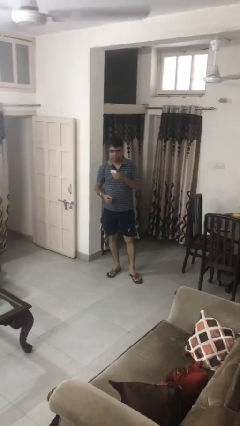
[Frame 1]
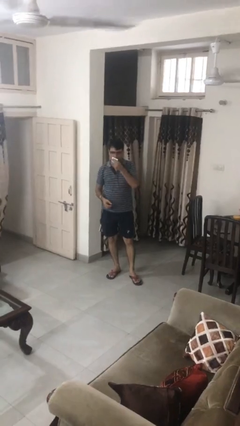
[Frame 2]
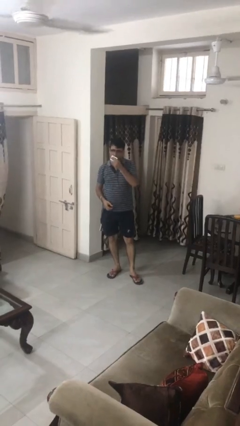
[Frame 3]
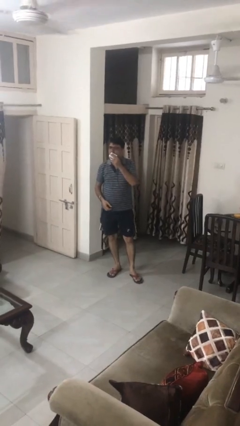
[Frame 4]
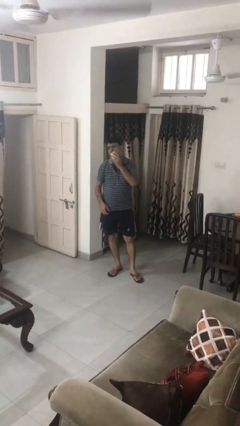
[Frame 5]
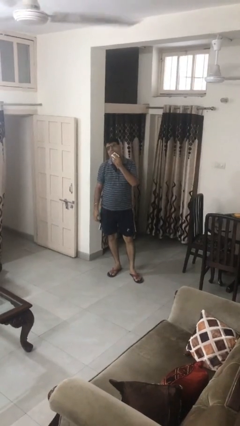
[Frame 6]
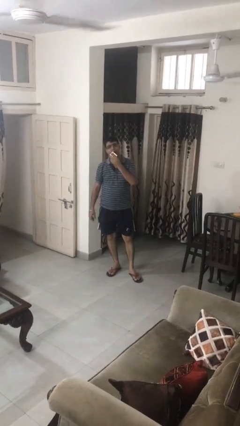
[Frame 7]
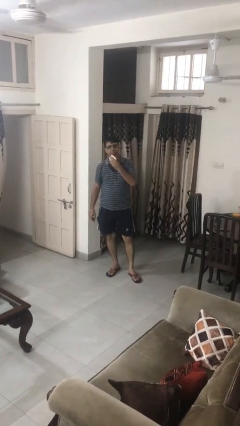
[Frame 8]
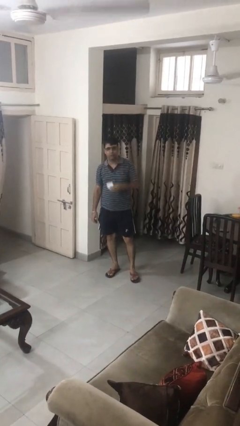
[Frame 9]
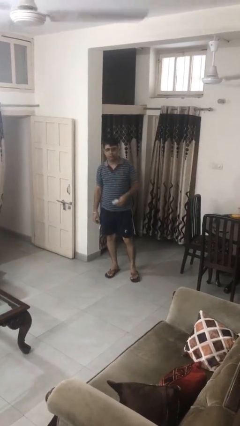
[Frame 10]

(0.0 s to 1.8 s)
person wipes mouth with napkin

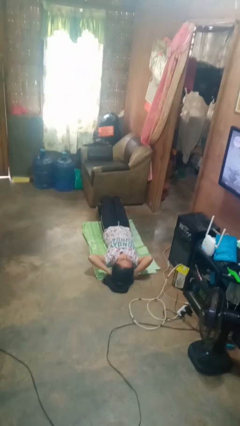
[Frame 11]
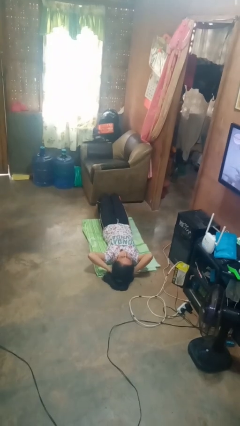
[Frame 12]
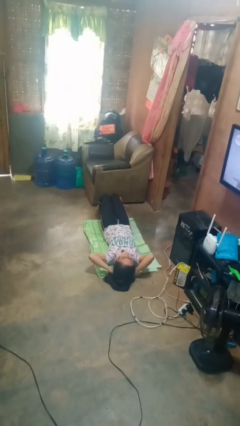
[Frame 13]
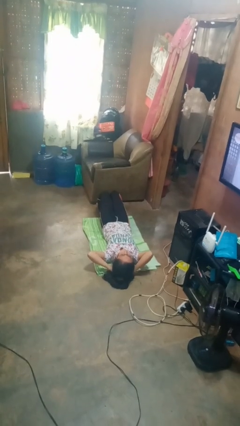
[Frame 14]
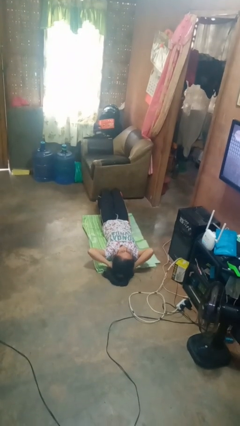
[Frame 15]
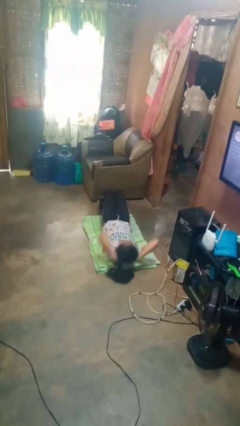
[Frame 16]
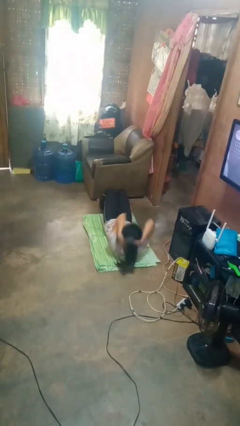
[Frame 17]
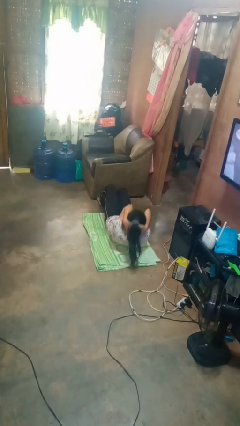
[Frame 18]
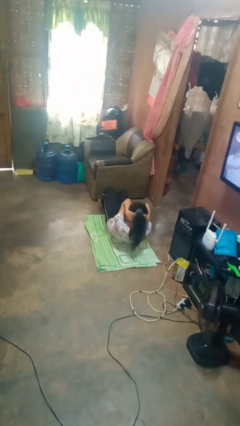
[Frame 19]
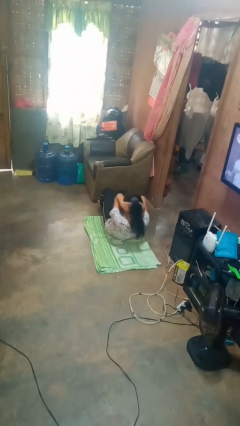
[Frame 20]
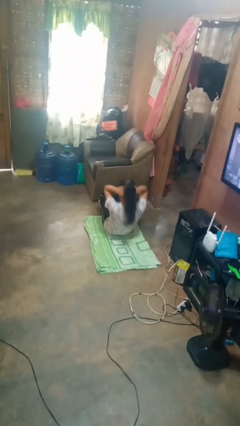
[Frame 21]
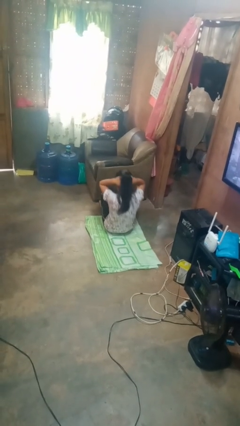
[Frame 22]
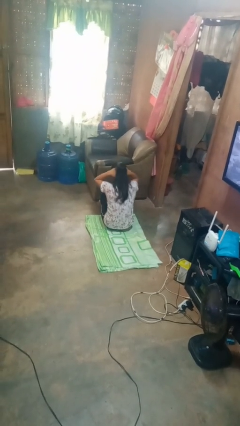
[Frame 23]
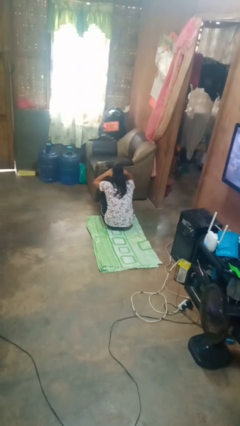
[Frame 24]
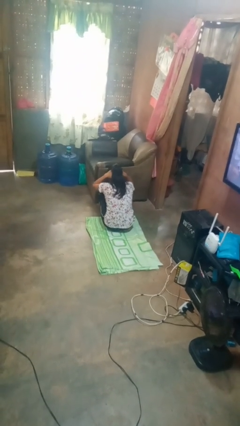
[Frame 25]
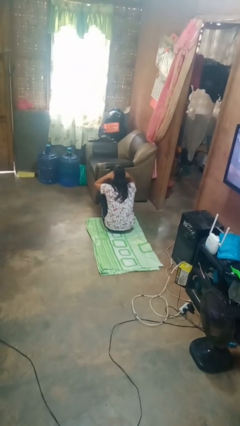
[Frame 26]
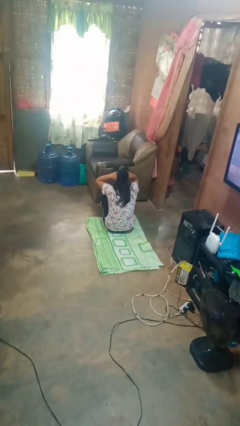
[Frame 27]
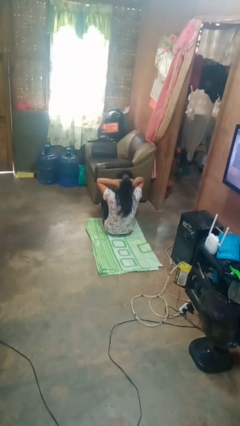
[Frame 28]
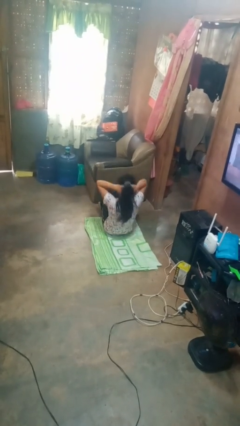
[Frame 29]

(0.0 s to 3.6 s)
person exercises with situp

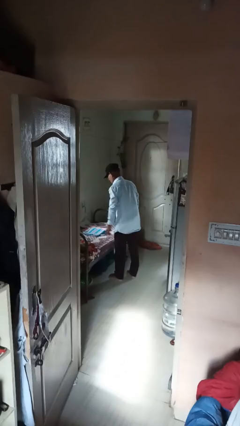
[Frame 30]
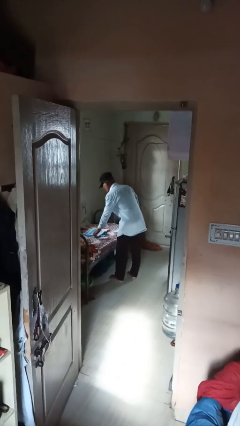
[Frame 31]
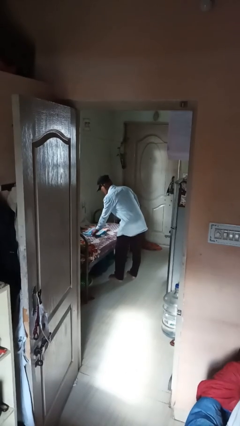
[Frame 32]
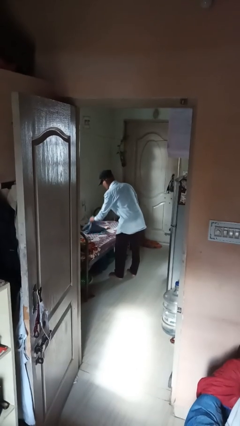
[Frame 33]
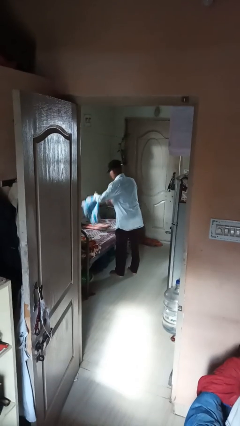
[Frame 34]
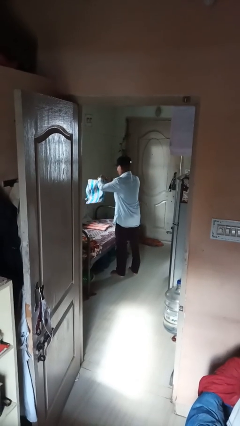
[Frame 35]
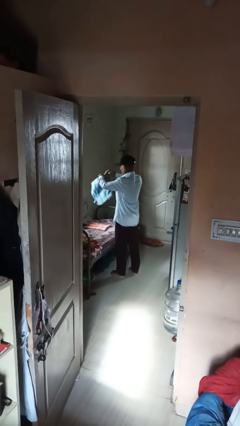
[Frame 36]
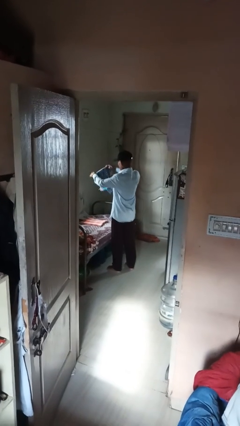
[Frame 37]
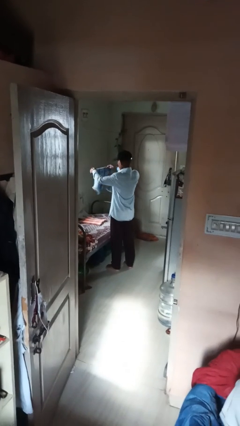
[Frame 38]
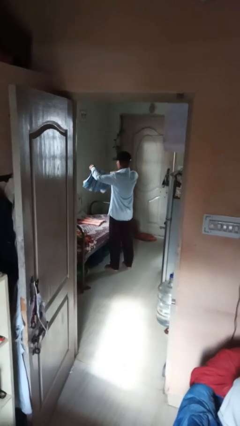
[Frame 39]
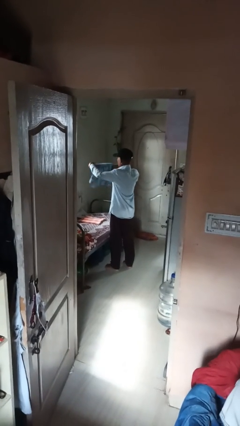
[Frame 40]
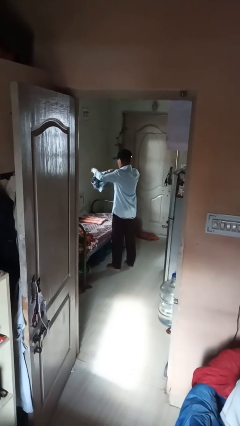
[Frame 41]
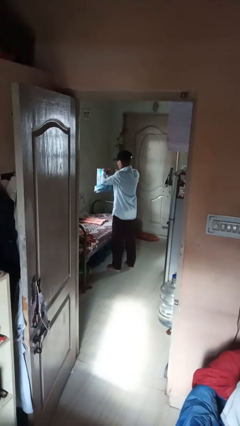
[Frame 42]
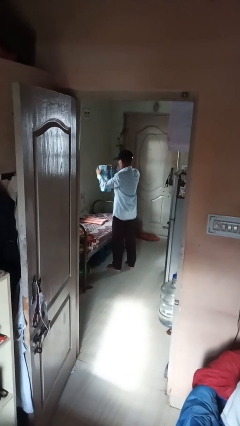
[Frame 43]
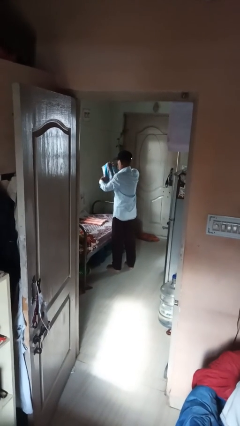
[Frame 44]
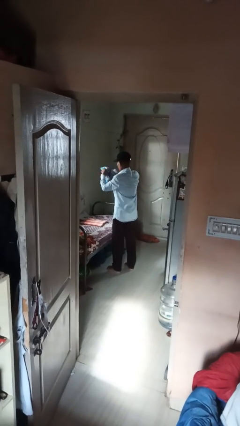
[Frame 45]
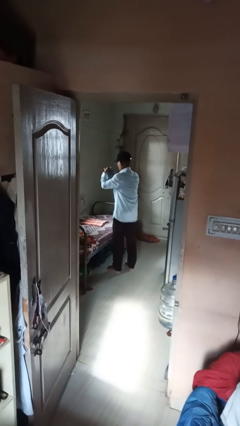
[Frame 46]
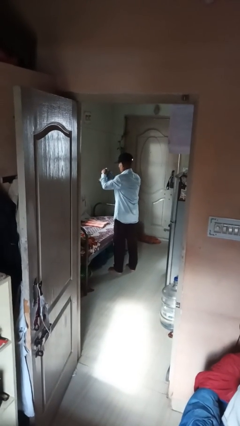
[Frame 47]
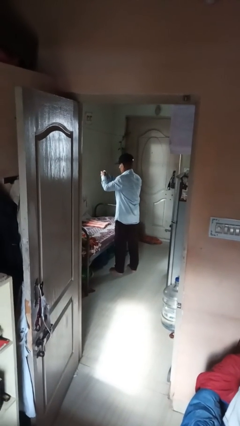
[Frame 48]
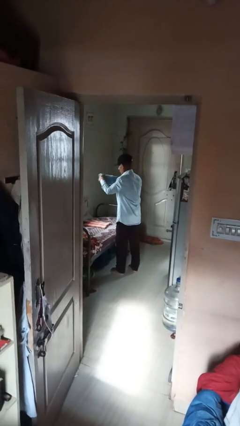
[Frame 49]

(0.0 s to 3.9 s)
person folds towel

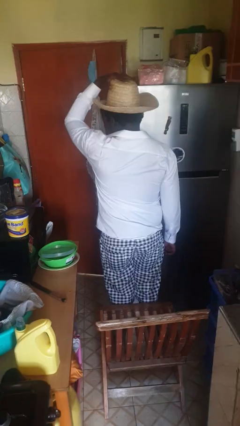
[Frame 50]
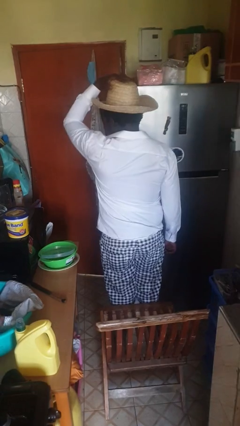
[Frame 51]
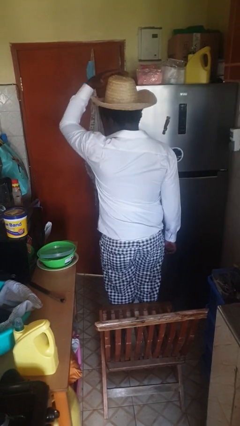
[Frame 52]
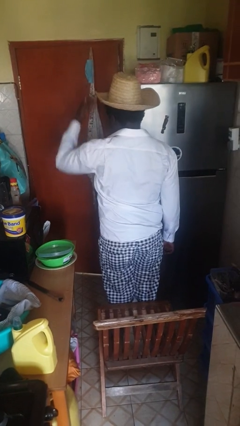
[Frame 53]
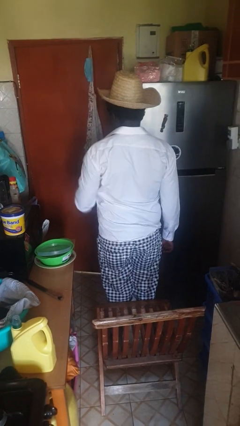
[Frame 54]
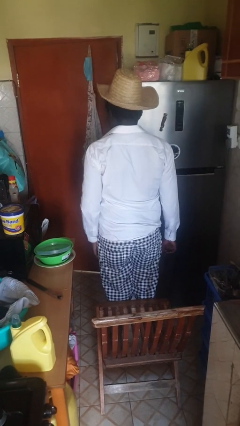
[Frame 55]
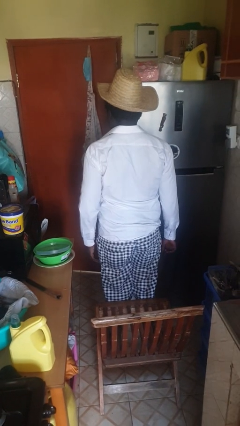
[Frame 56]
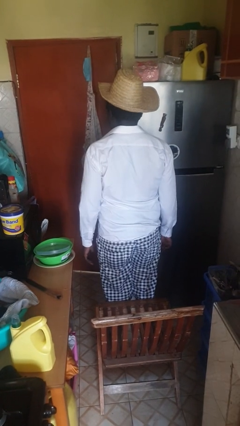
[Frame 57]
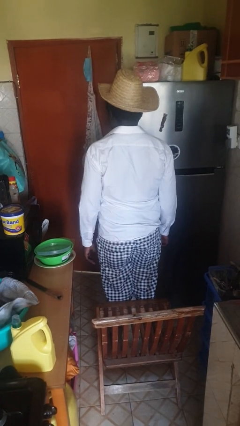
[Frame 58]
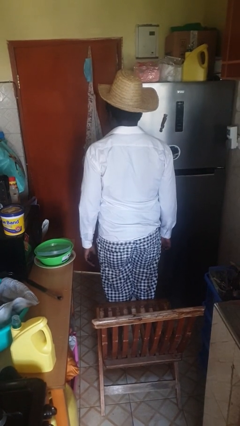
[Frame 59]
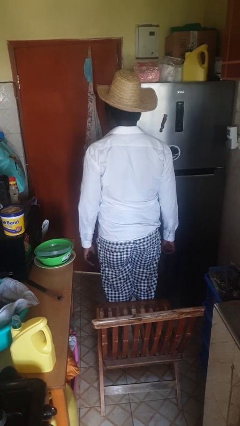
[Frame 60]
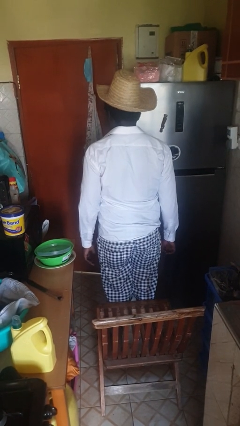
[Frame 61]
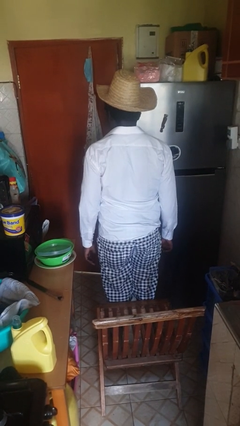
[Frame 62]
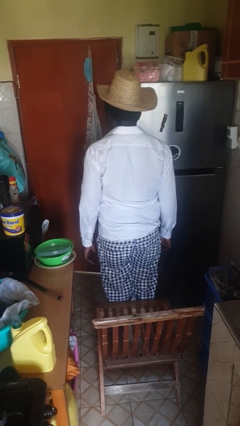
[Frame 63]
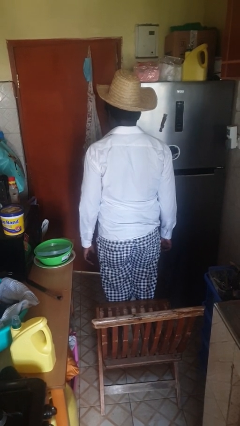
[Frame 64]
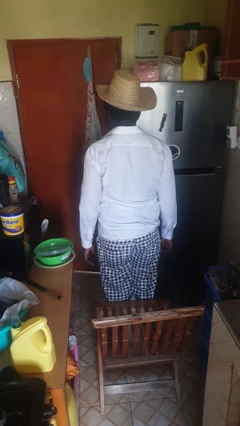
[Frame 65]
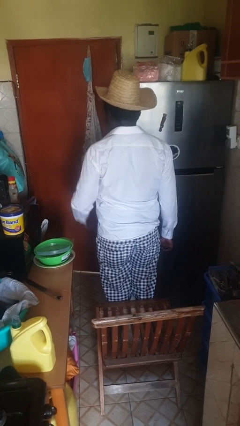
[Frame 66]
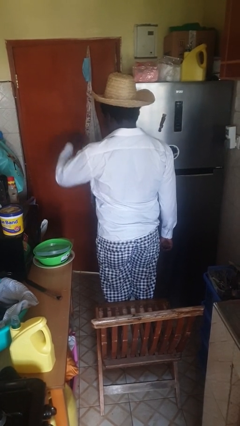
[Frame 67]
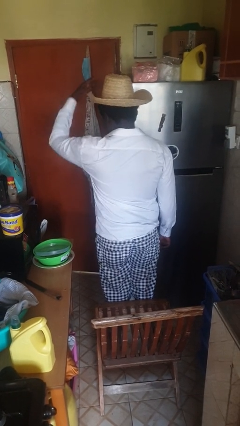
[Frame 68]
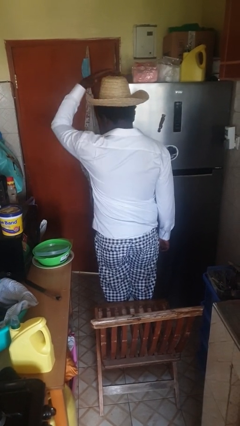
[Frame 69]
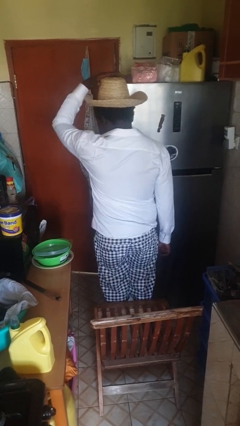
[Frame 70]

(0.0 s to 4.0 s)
person puts on hat

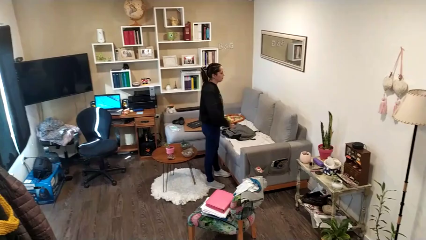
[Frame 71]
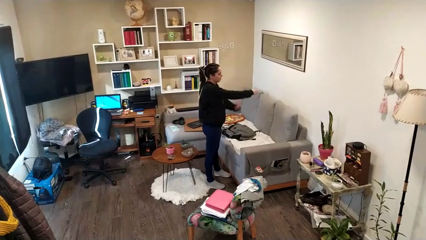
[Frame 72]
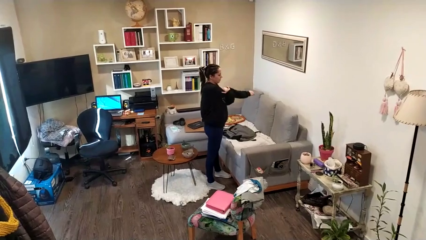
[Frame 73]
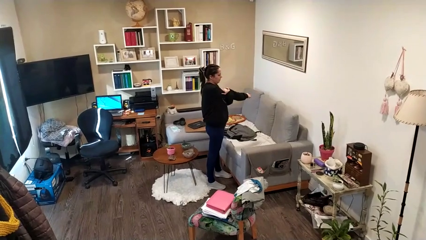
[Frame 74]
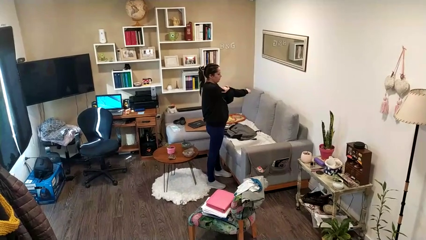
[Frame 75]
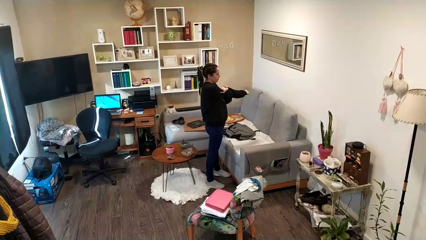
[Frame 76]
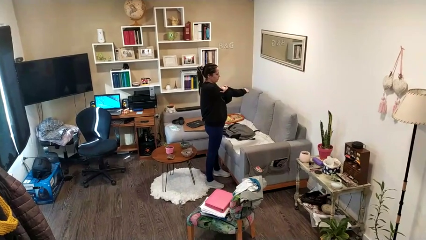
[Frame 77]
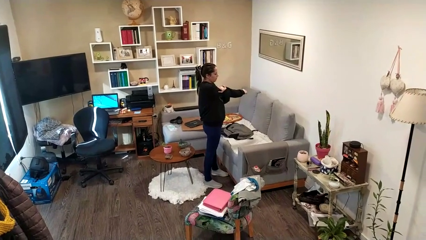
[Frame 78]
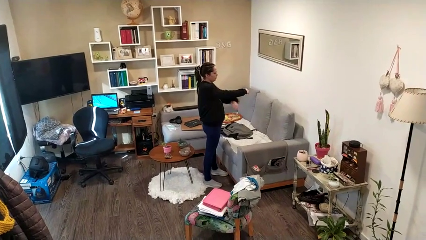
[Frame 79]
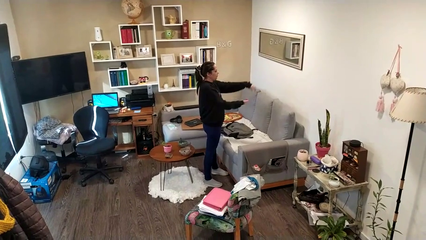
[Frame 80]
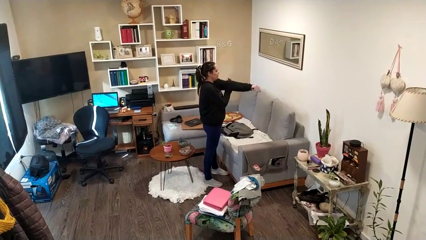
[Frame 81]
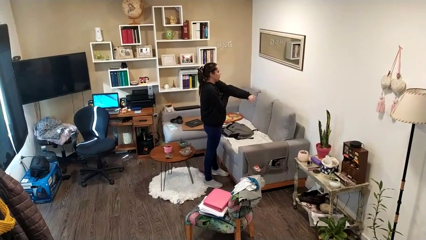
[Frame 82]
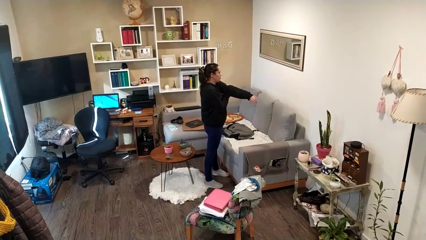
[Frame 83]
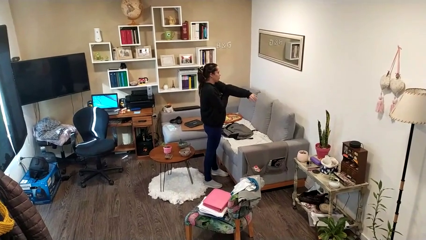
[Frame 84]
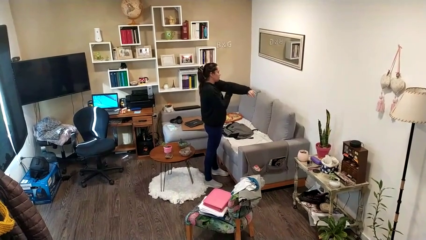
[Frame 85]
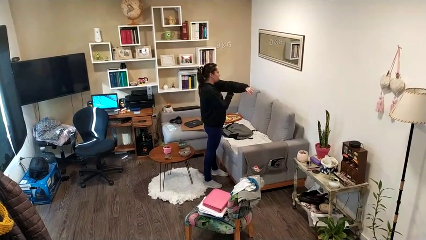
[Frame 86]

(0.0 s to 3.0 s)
person stretches arms to side

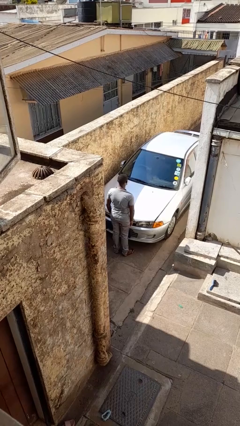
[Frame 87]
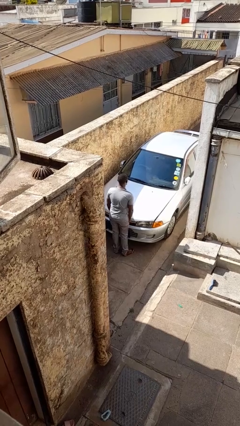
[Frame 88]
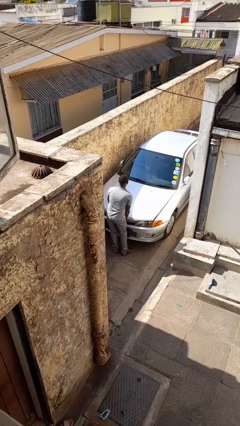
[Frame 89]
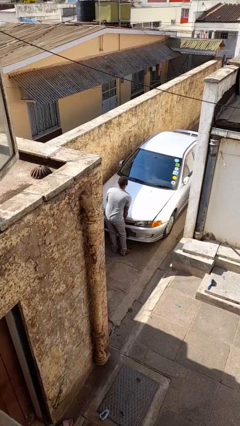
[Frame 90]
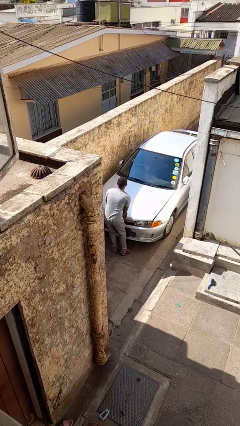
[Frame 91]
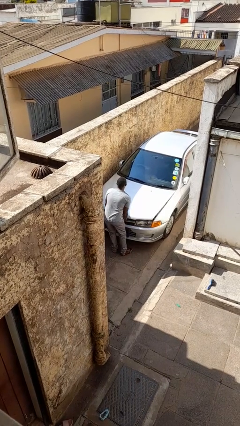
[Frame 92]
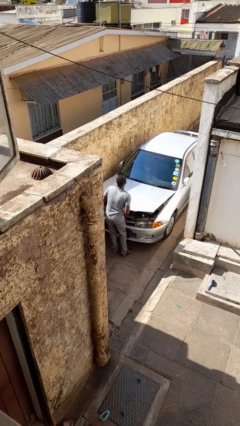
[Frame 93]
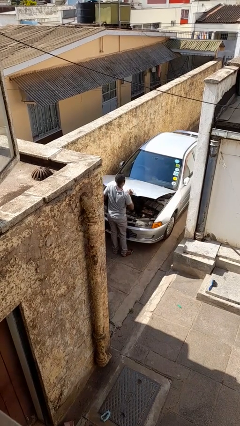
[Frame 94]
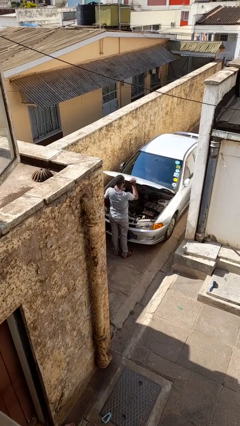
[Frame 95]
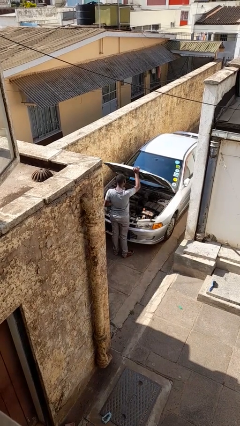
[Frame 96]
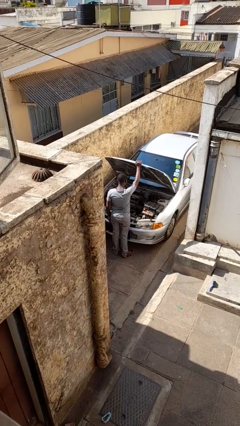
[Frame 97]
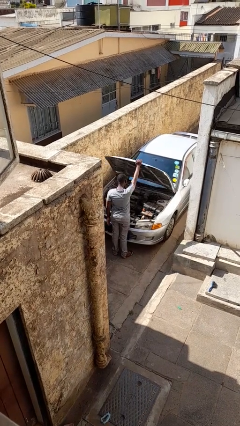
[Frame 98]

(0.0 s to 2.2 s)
person opens car hood
